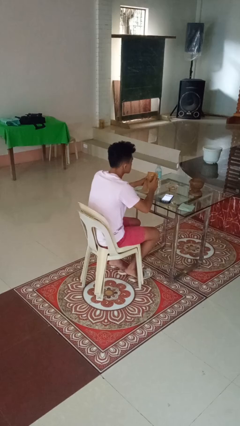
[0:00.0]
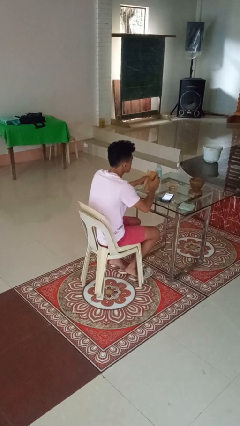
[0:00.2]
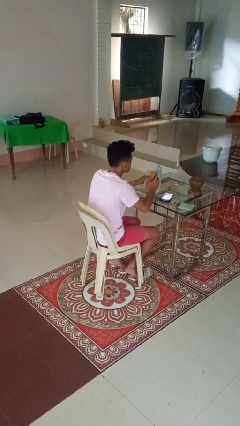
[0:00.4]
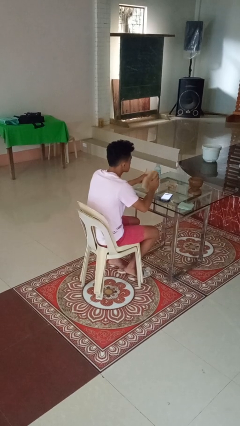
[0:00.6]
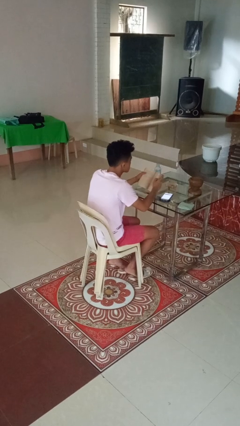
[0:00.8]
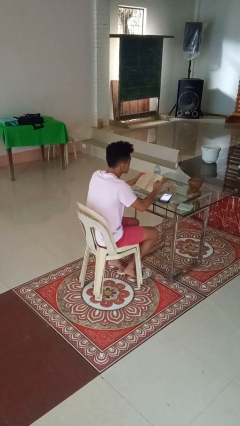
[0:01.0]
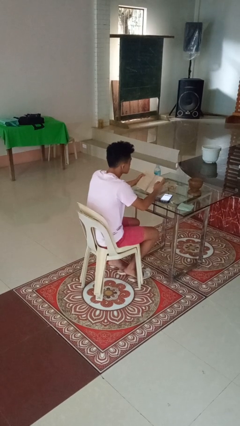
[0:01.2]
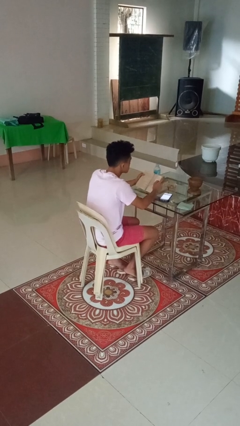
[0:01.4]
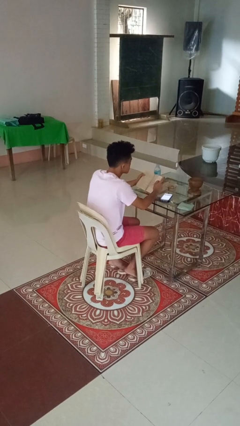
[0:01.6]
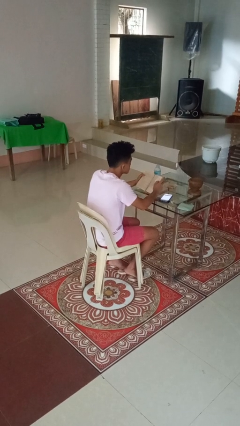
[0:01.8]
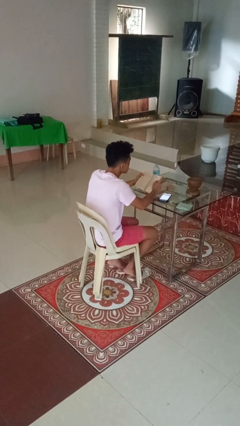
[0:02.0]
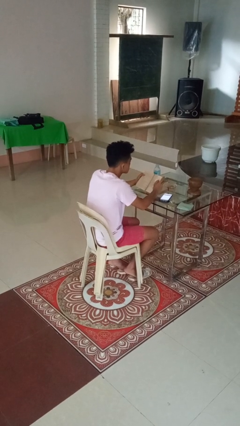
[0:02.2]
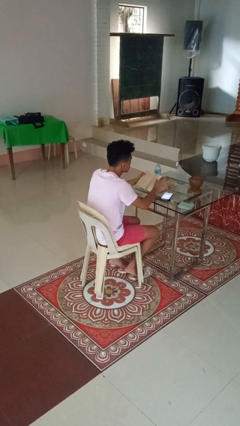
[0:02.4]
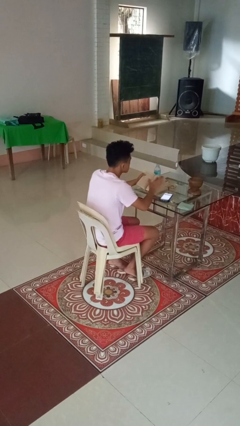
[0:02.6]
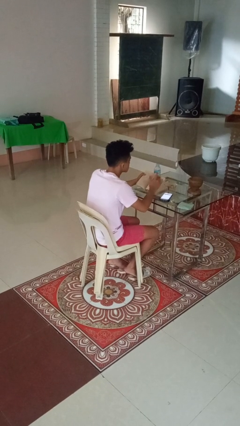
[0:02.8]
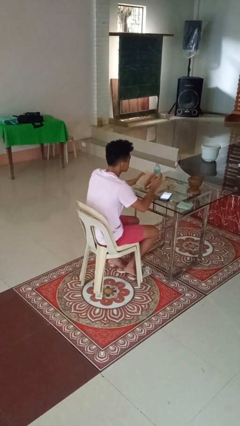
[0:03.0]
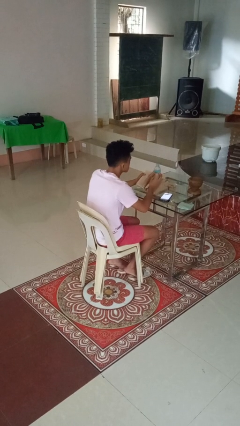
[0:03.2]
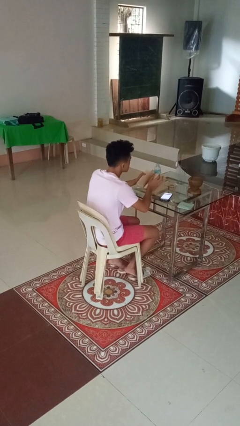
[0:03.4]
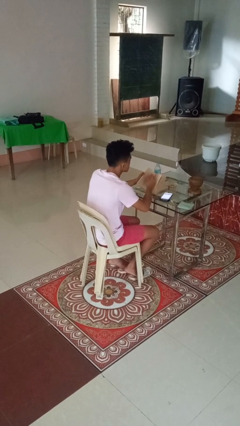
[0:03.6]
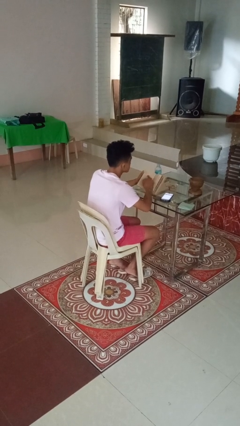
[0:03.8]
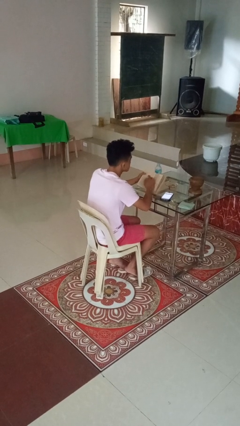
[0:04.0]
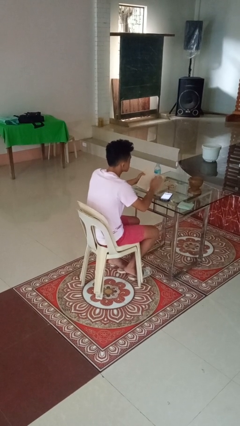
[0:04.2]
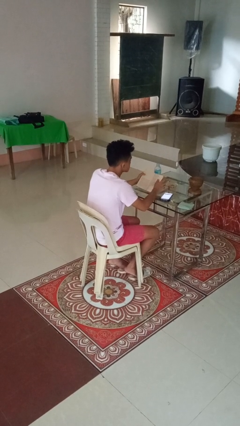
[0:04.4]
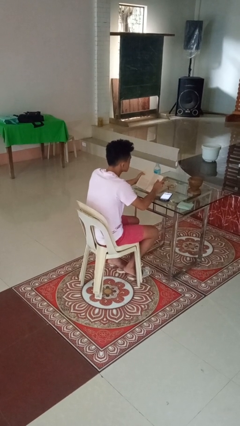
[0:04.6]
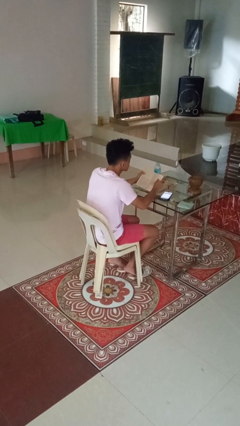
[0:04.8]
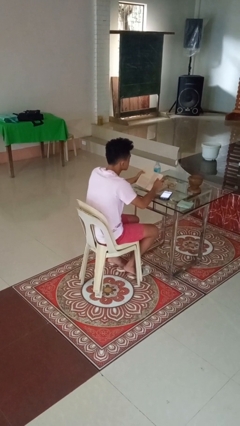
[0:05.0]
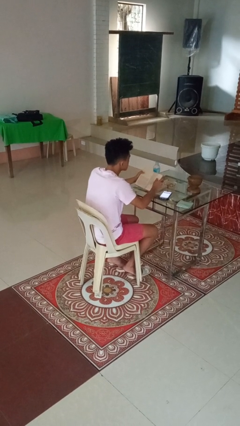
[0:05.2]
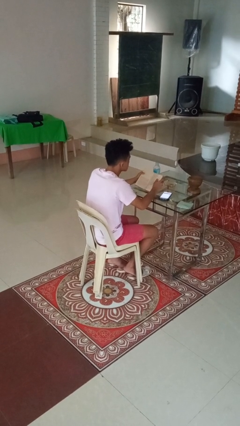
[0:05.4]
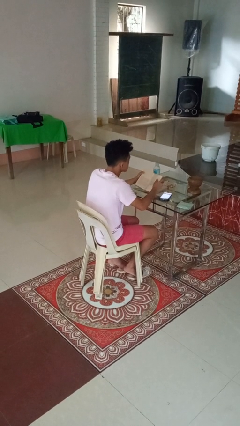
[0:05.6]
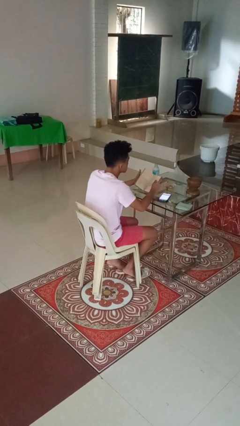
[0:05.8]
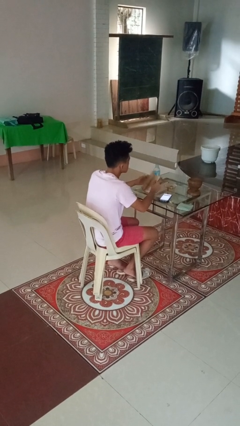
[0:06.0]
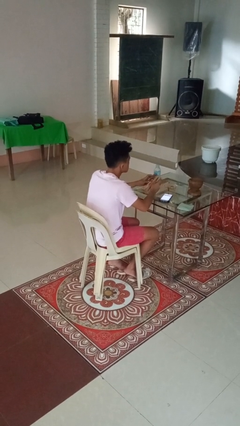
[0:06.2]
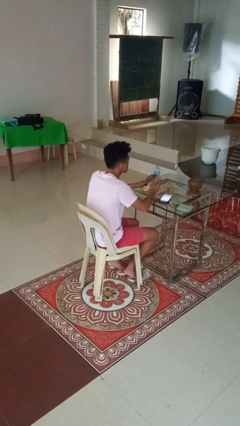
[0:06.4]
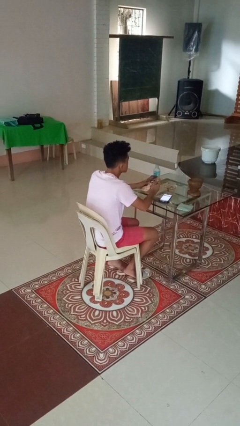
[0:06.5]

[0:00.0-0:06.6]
person reads book

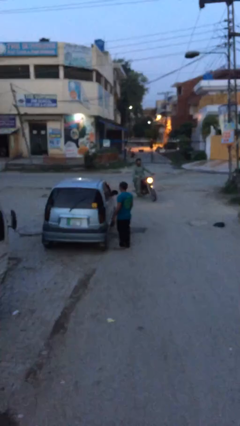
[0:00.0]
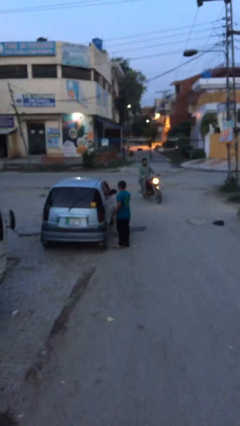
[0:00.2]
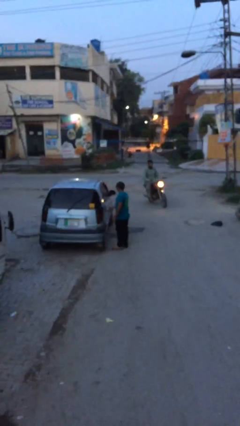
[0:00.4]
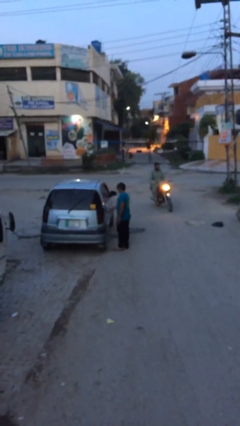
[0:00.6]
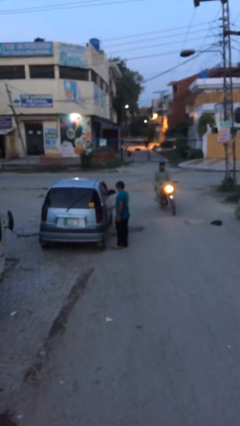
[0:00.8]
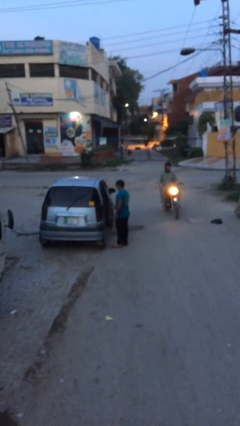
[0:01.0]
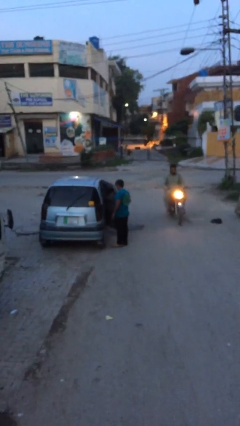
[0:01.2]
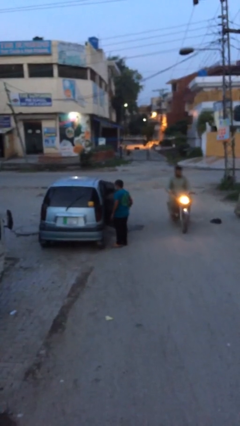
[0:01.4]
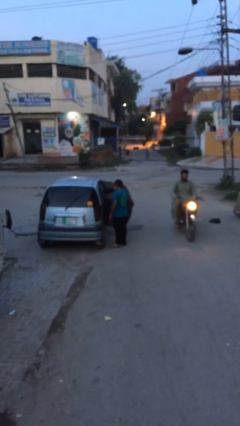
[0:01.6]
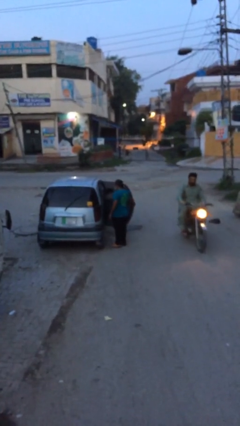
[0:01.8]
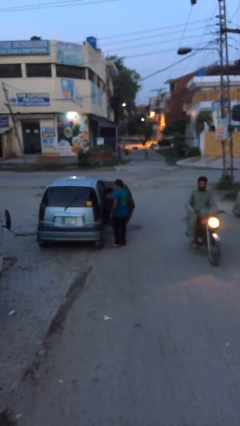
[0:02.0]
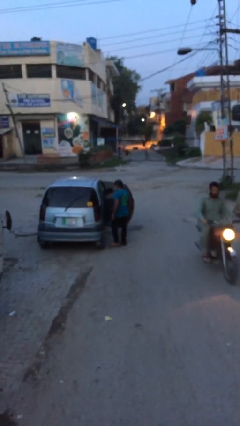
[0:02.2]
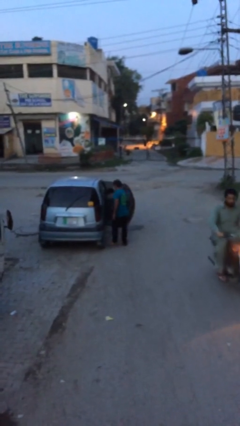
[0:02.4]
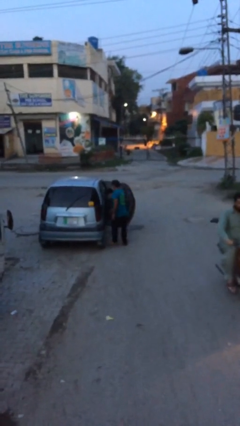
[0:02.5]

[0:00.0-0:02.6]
person opens car door

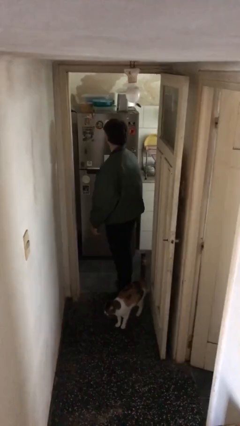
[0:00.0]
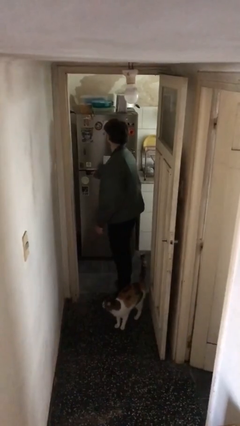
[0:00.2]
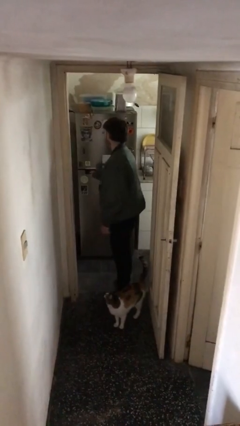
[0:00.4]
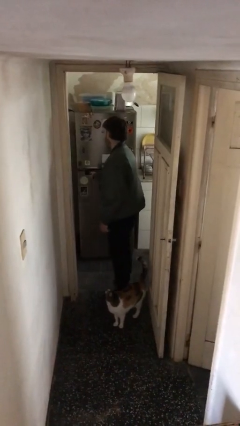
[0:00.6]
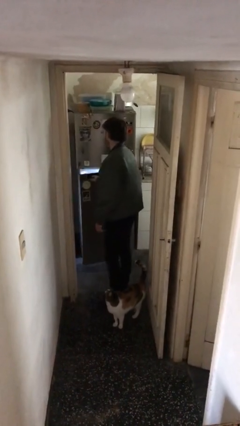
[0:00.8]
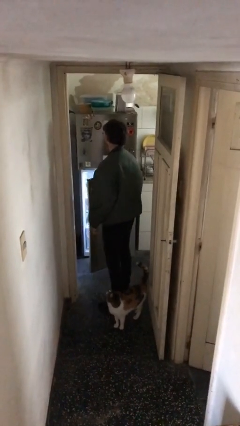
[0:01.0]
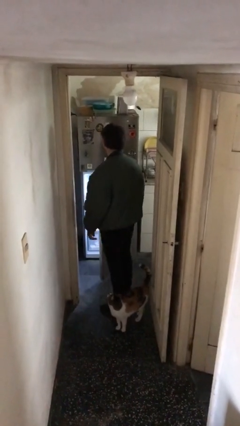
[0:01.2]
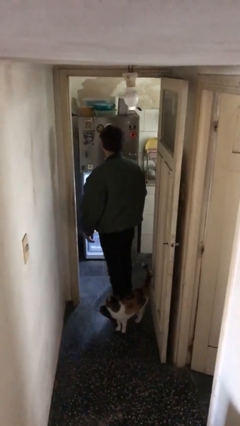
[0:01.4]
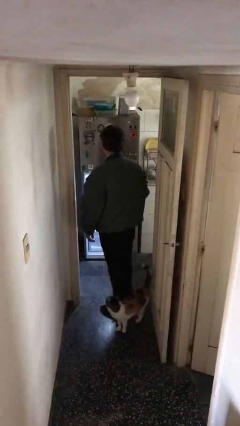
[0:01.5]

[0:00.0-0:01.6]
person opens refrigerator

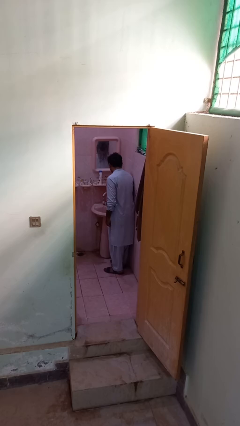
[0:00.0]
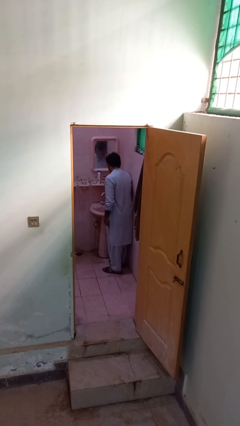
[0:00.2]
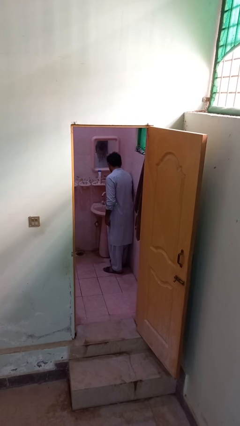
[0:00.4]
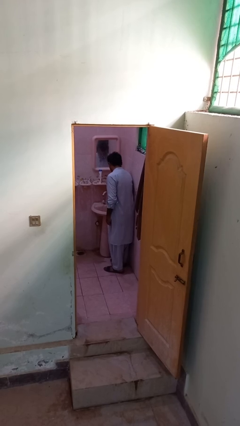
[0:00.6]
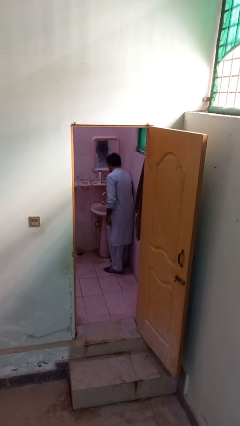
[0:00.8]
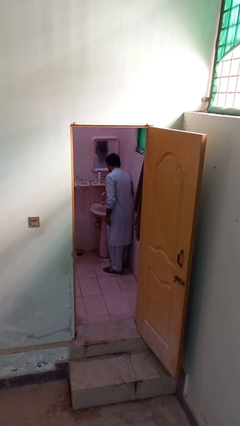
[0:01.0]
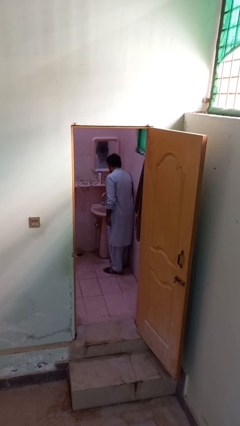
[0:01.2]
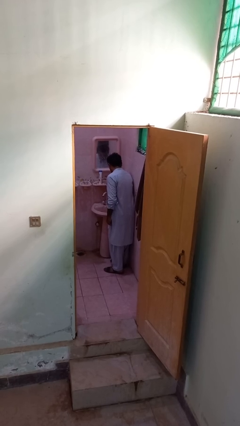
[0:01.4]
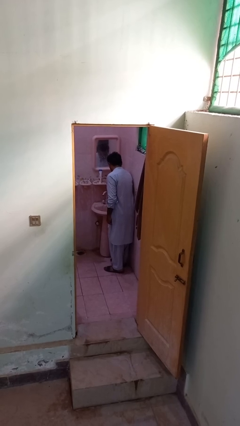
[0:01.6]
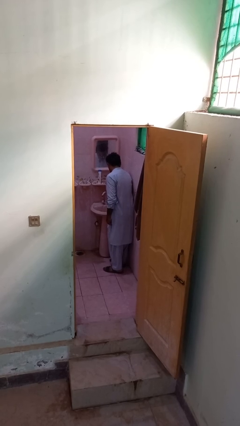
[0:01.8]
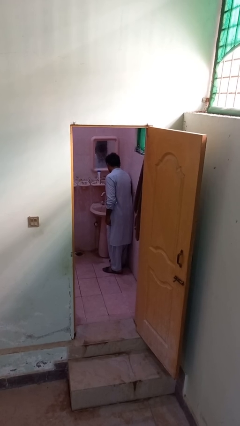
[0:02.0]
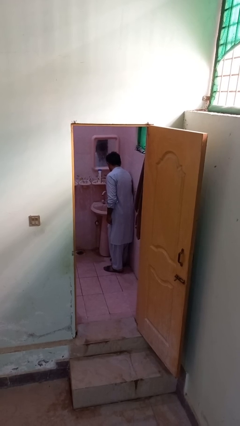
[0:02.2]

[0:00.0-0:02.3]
person turns off faucet

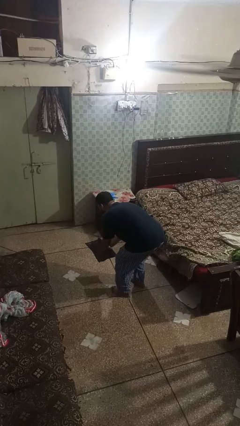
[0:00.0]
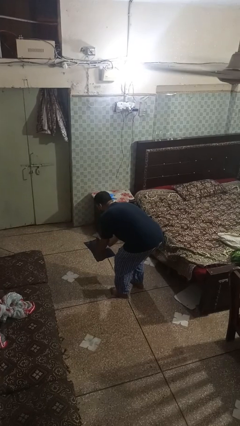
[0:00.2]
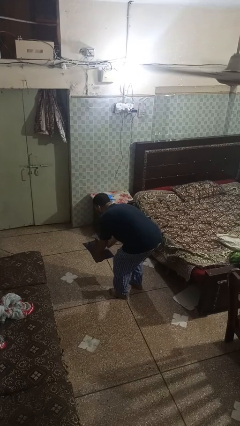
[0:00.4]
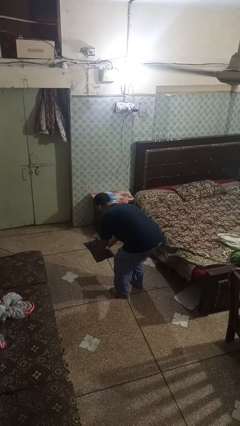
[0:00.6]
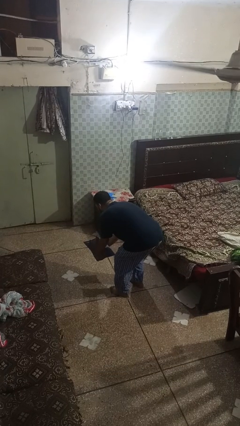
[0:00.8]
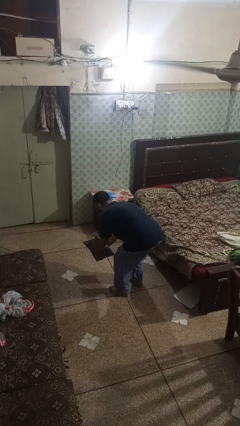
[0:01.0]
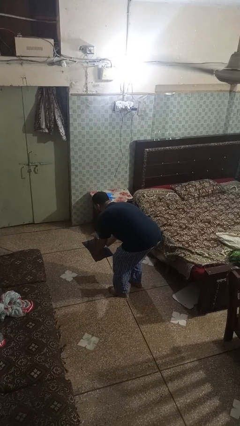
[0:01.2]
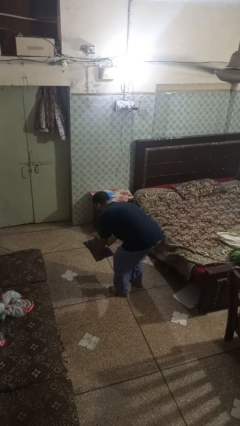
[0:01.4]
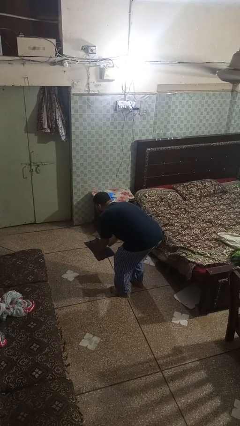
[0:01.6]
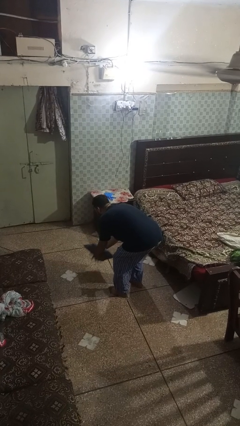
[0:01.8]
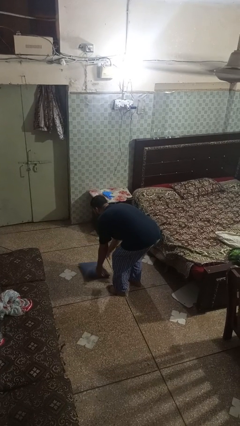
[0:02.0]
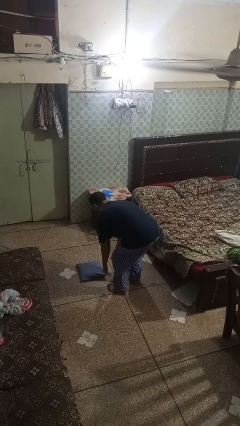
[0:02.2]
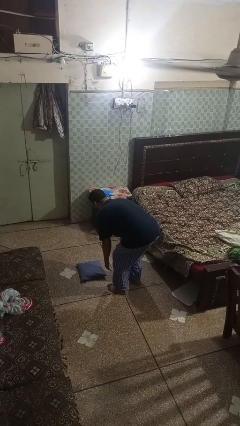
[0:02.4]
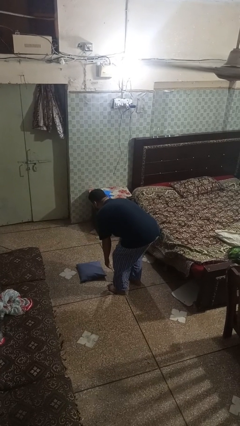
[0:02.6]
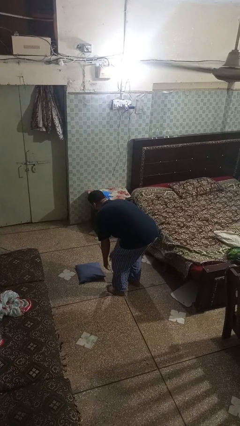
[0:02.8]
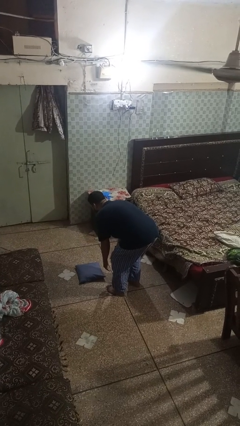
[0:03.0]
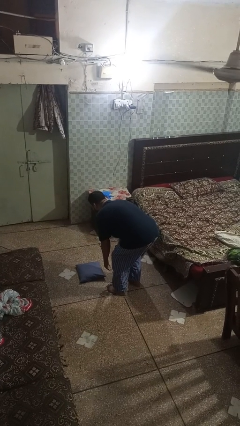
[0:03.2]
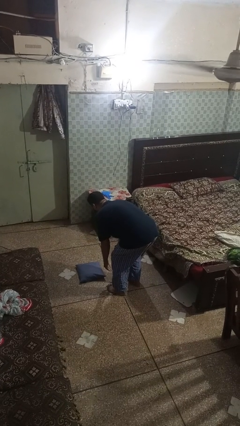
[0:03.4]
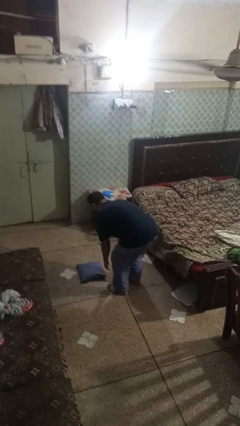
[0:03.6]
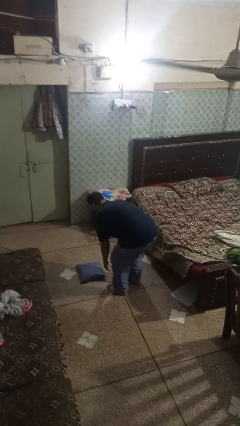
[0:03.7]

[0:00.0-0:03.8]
person catches dropped object

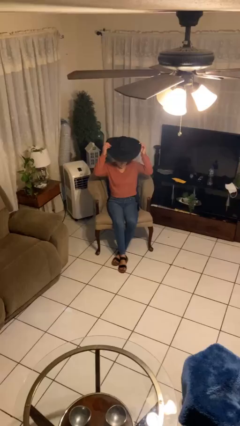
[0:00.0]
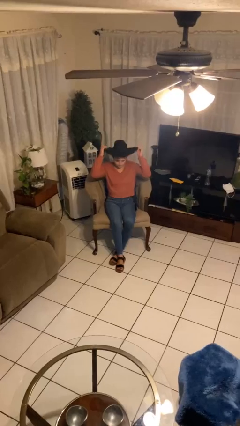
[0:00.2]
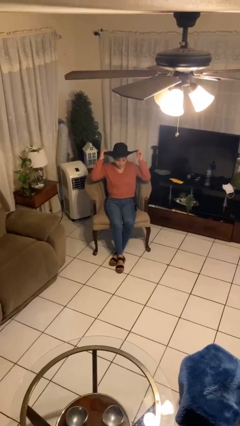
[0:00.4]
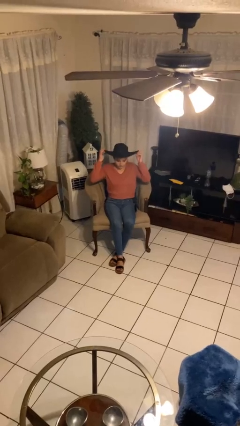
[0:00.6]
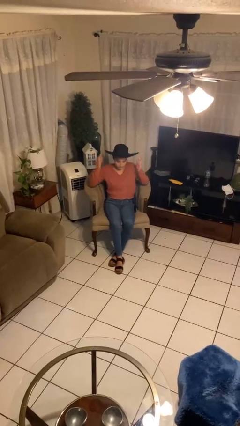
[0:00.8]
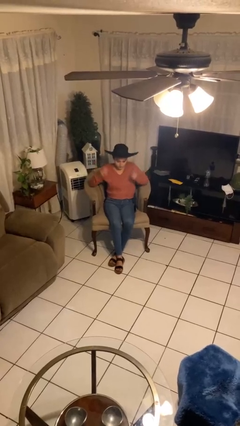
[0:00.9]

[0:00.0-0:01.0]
person puts on hat
